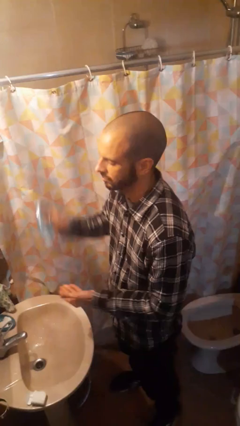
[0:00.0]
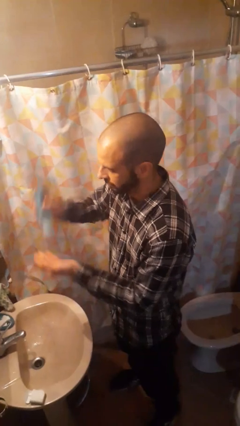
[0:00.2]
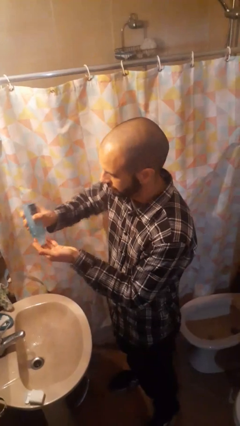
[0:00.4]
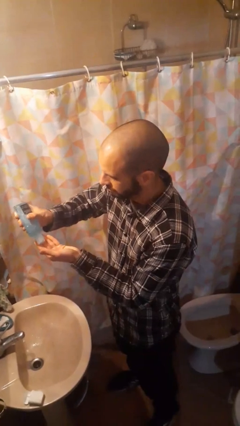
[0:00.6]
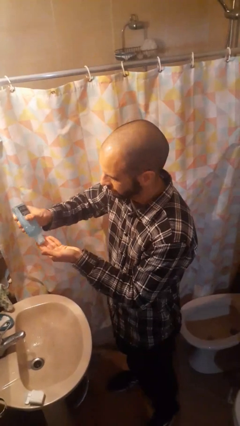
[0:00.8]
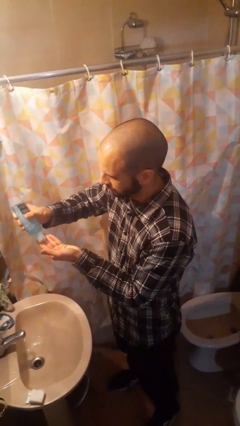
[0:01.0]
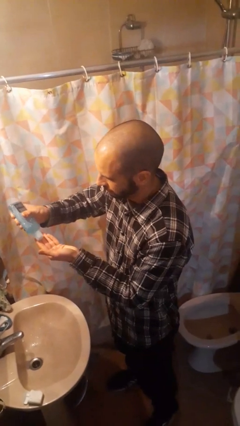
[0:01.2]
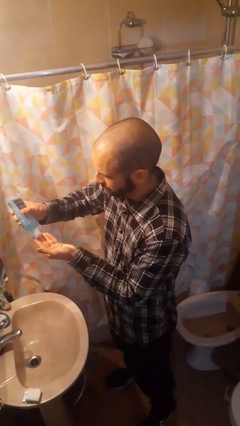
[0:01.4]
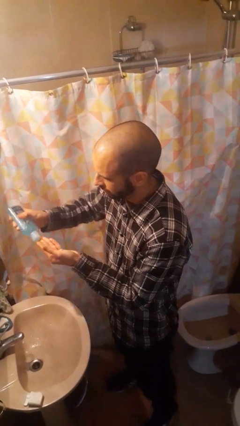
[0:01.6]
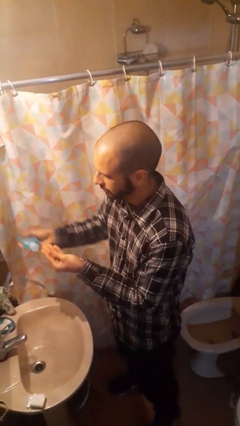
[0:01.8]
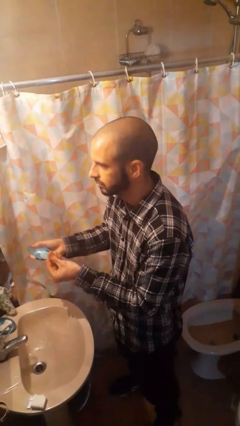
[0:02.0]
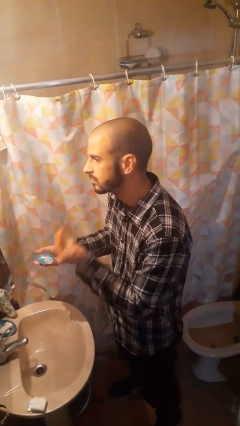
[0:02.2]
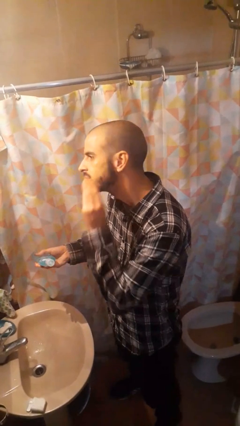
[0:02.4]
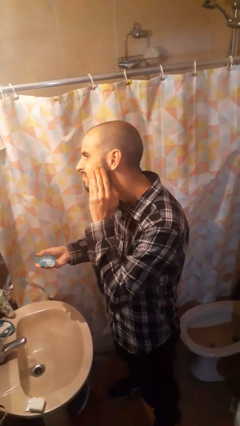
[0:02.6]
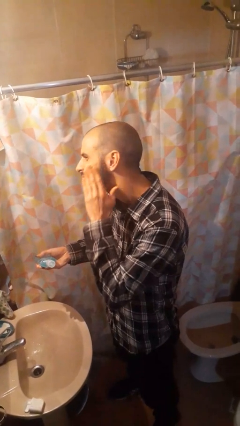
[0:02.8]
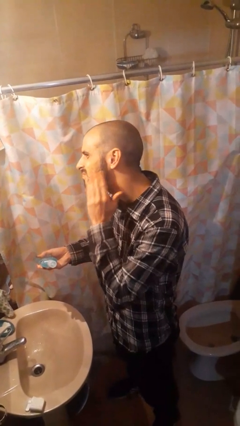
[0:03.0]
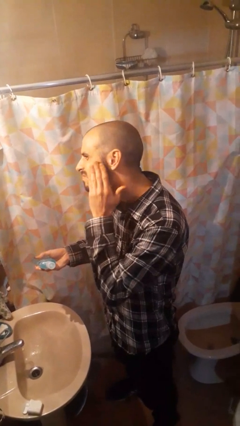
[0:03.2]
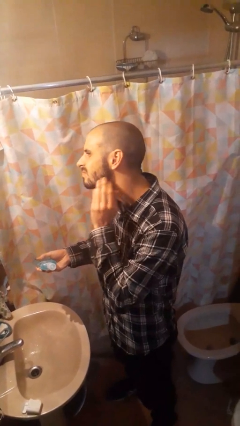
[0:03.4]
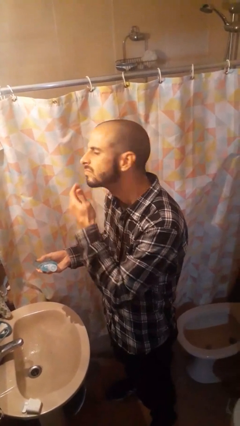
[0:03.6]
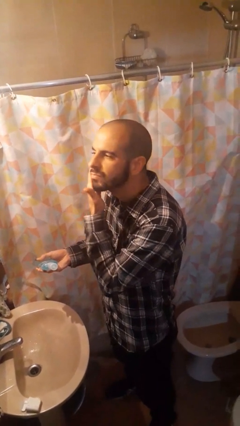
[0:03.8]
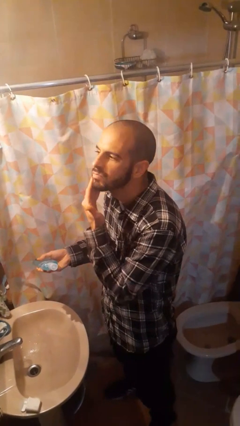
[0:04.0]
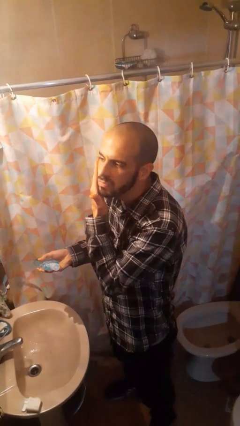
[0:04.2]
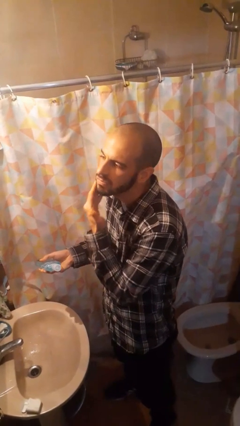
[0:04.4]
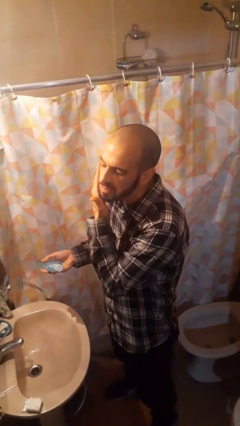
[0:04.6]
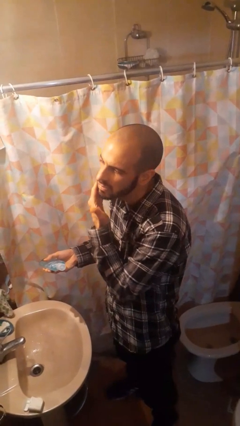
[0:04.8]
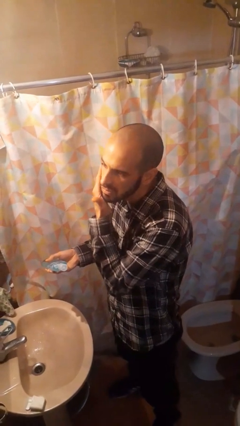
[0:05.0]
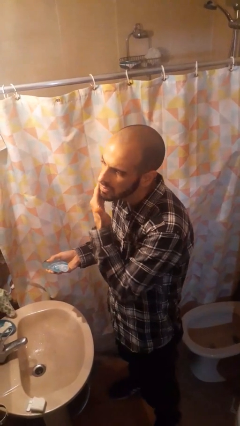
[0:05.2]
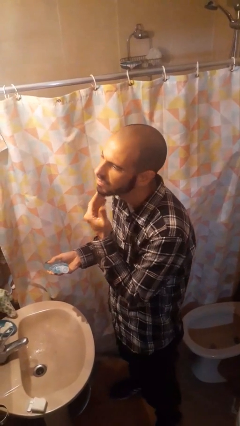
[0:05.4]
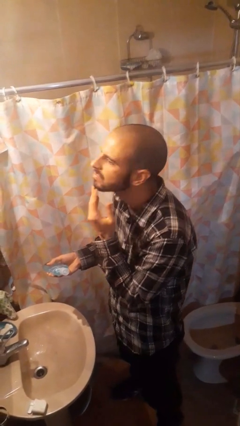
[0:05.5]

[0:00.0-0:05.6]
person applies facial moisturizer

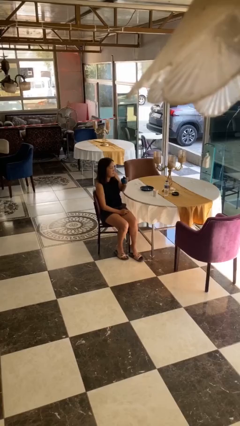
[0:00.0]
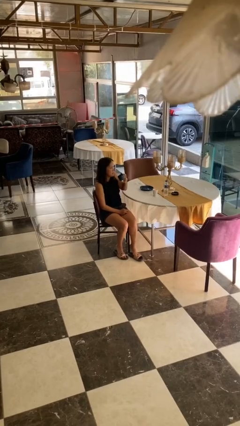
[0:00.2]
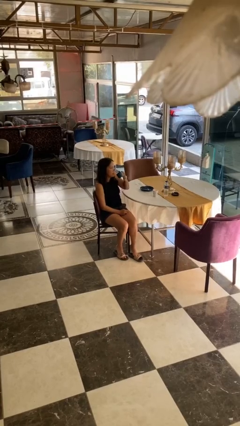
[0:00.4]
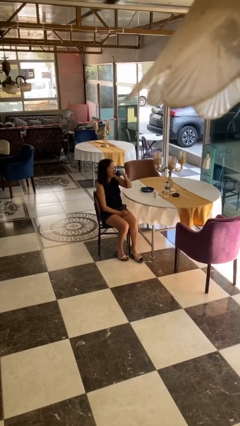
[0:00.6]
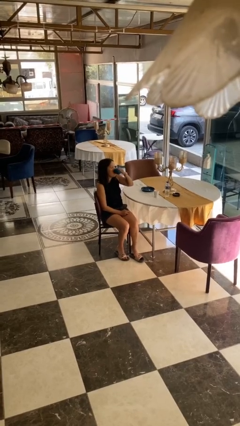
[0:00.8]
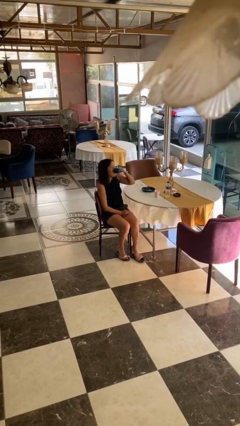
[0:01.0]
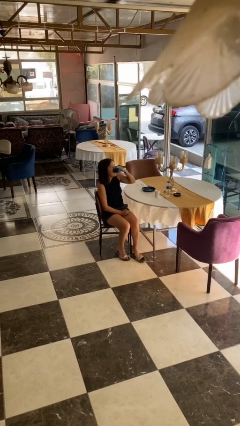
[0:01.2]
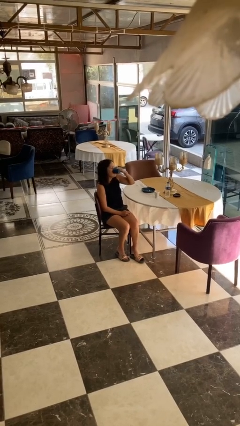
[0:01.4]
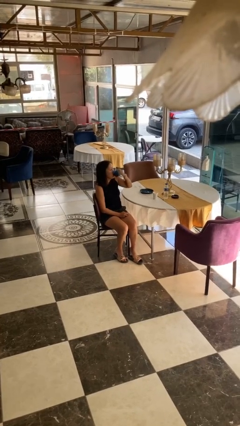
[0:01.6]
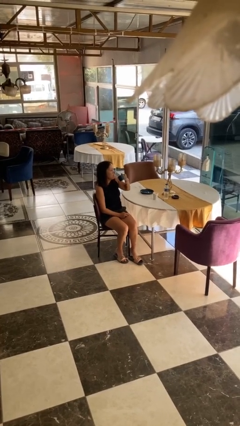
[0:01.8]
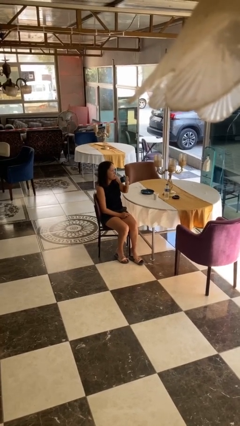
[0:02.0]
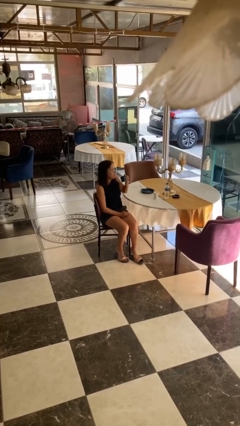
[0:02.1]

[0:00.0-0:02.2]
person drinks from mug

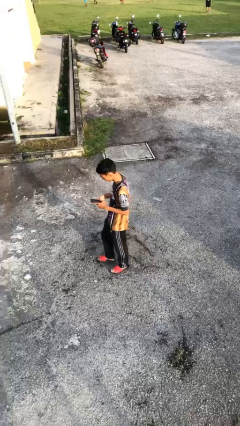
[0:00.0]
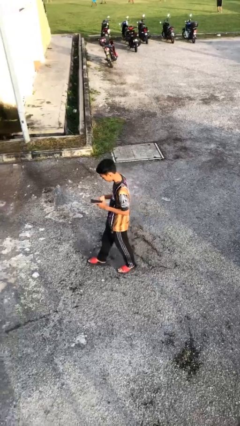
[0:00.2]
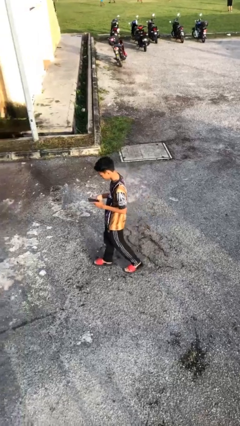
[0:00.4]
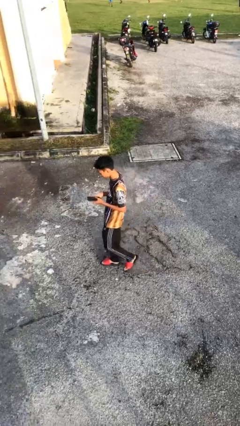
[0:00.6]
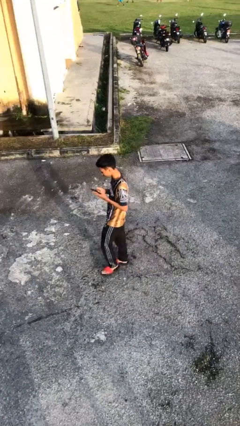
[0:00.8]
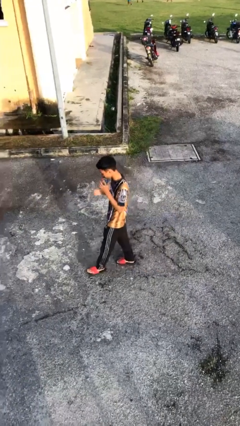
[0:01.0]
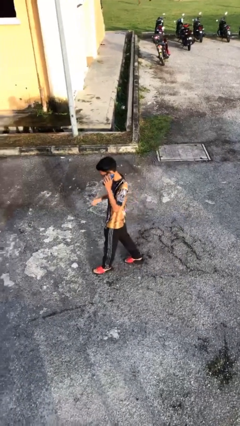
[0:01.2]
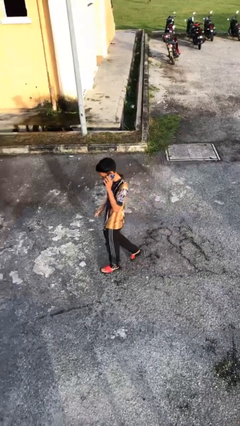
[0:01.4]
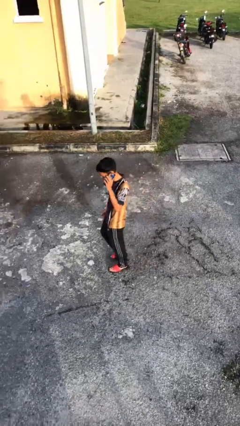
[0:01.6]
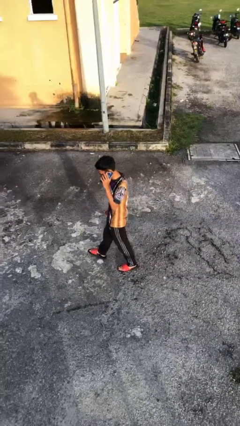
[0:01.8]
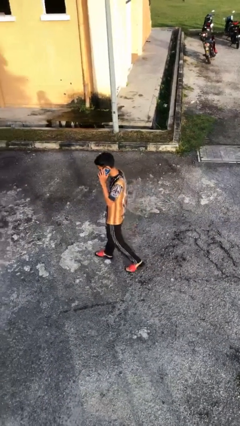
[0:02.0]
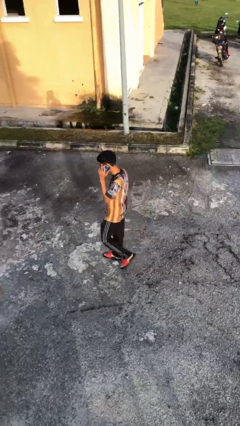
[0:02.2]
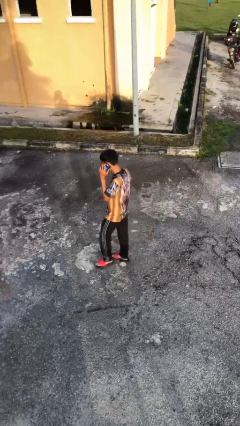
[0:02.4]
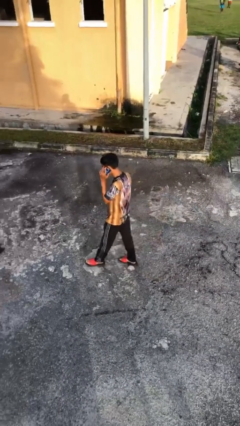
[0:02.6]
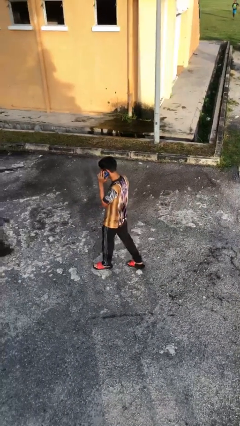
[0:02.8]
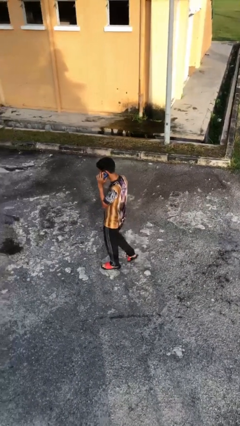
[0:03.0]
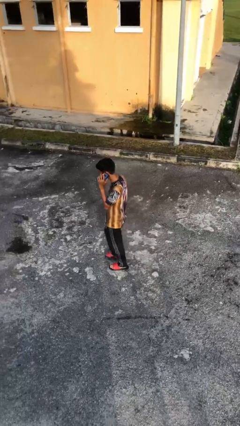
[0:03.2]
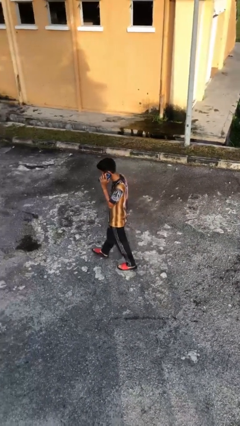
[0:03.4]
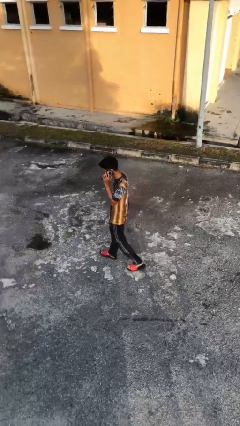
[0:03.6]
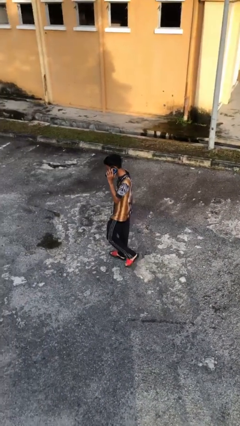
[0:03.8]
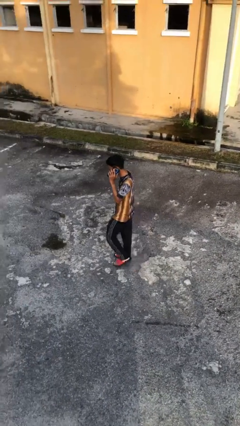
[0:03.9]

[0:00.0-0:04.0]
person talks on phone

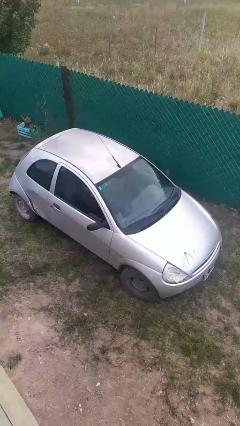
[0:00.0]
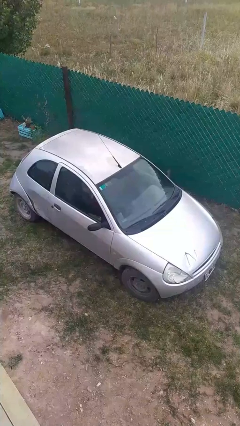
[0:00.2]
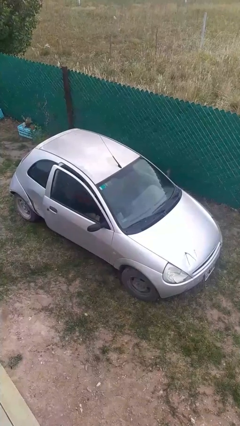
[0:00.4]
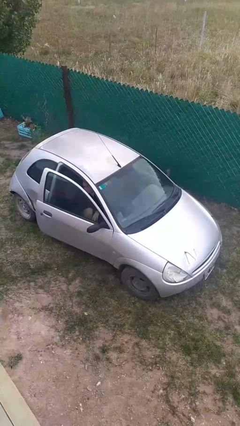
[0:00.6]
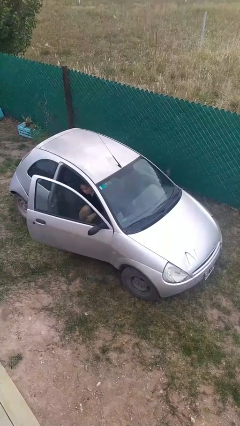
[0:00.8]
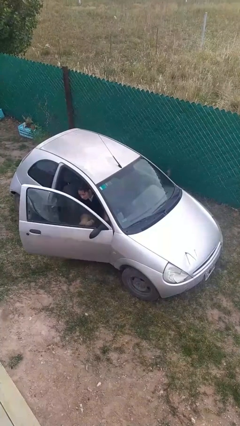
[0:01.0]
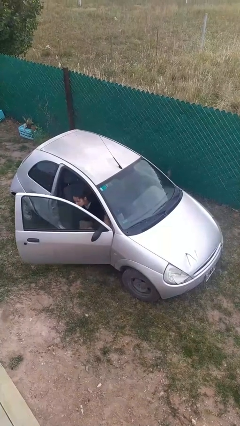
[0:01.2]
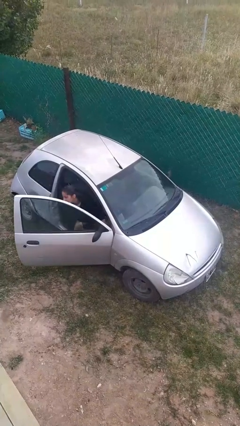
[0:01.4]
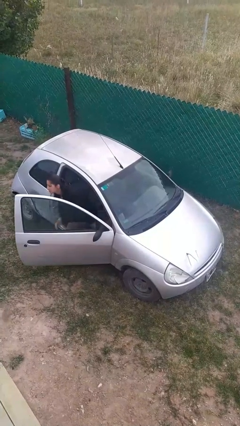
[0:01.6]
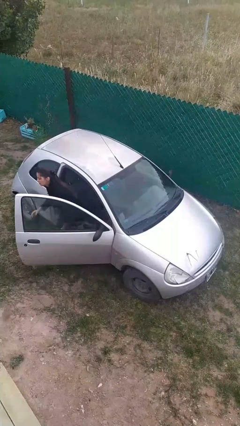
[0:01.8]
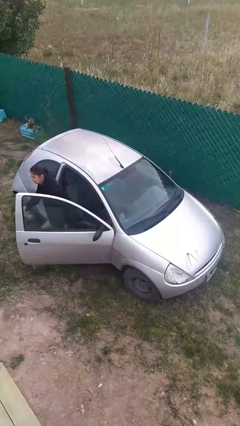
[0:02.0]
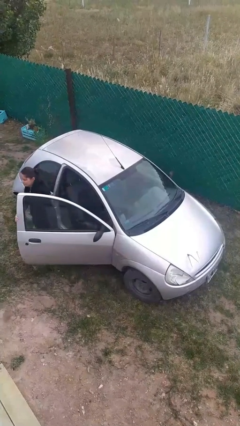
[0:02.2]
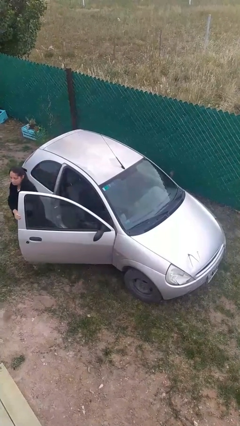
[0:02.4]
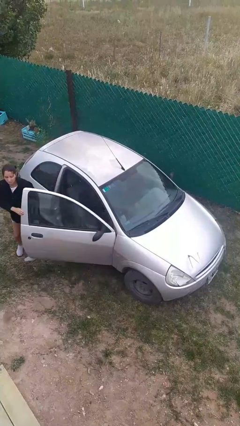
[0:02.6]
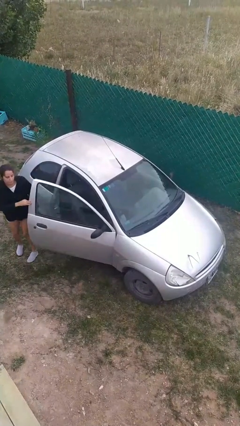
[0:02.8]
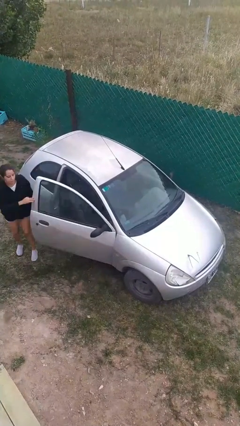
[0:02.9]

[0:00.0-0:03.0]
car drops off person

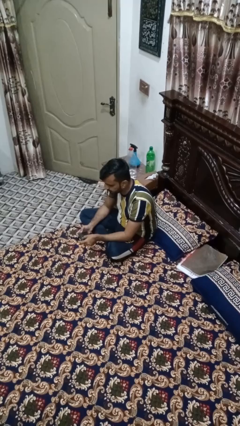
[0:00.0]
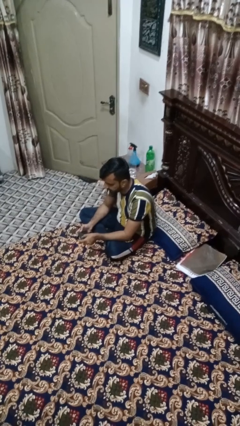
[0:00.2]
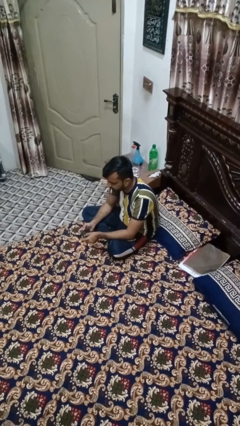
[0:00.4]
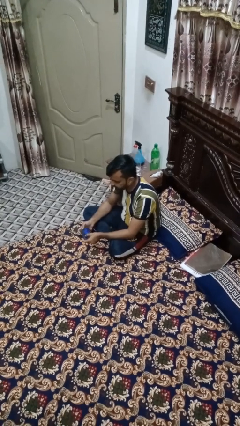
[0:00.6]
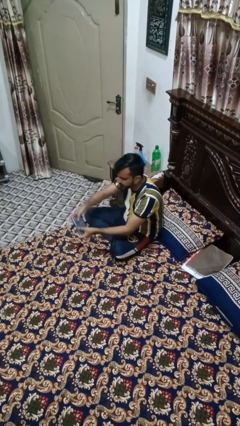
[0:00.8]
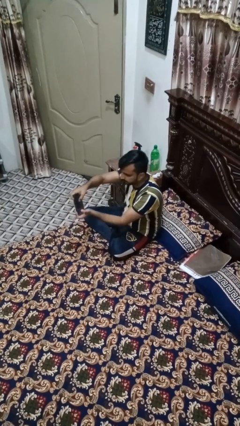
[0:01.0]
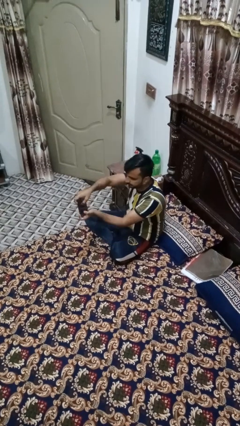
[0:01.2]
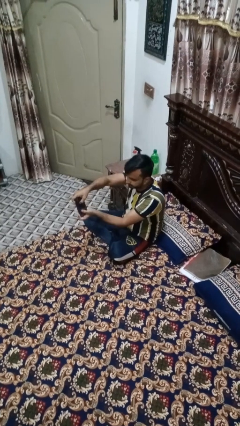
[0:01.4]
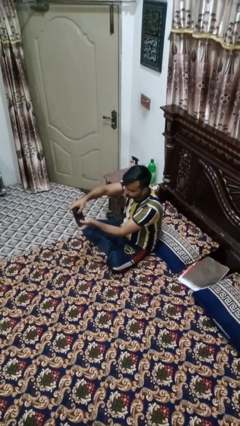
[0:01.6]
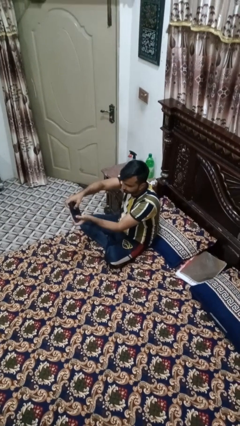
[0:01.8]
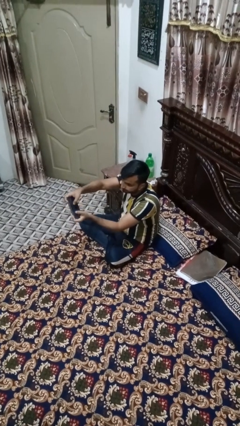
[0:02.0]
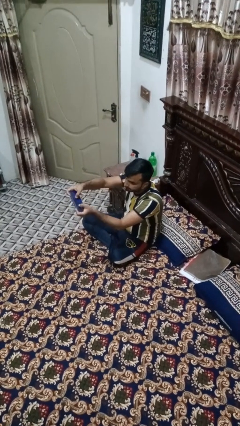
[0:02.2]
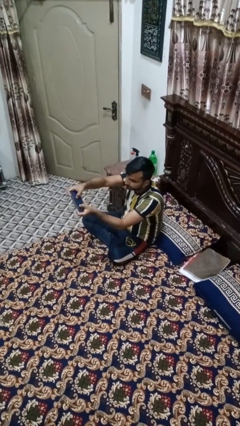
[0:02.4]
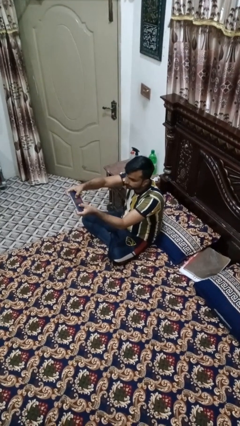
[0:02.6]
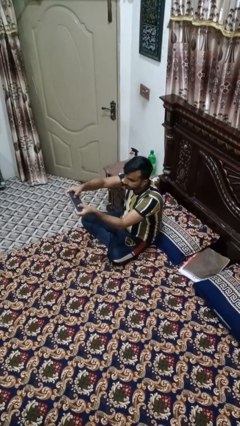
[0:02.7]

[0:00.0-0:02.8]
person interacts with handheld game
